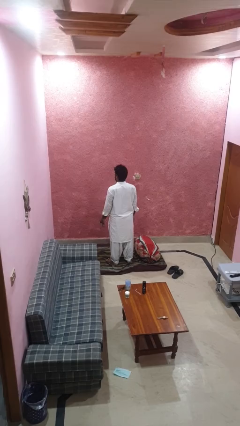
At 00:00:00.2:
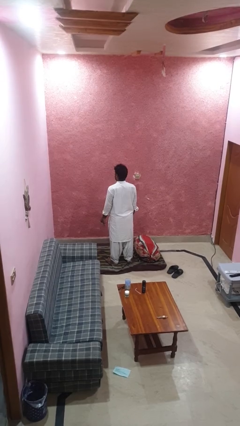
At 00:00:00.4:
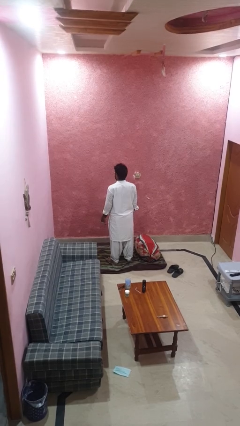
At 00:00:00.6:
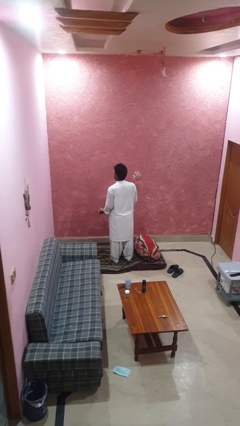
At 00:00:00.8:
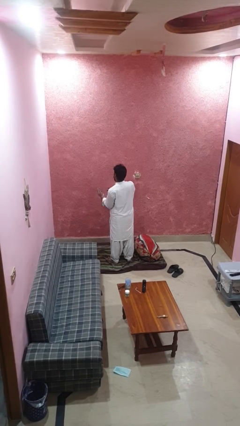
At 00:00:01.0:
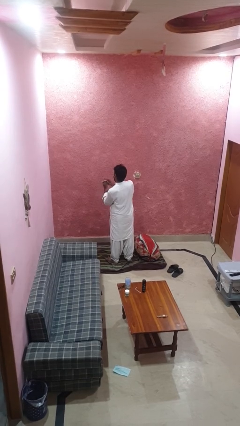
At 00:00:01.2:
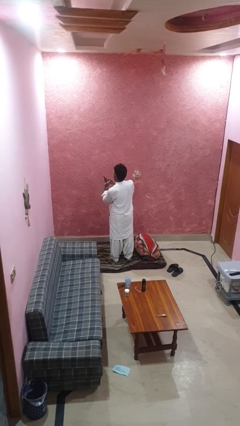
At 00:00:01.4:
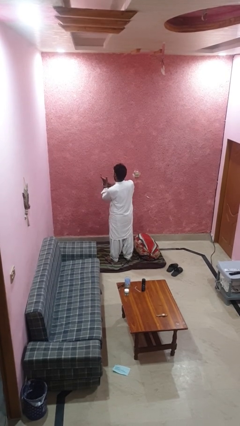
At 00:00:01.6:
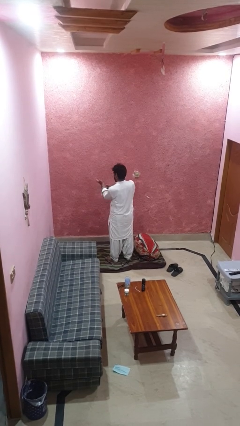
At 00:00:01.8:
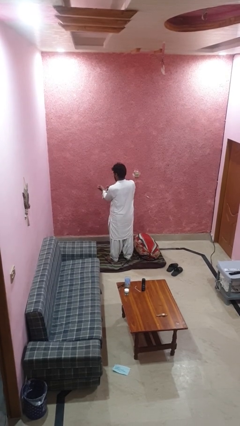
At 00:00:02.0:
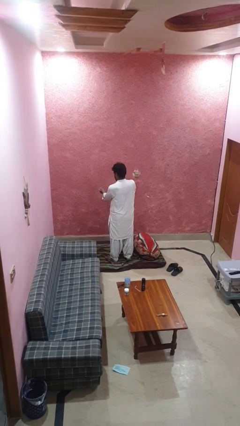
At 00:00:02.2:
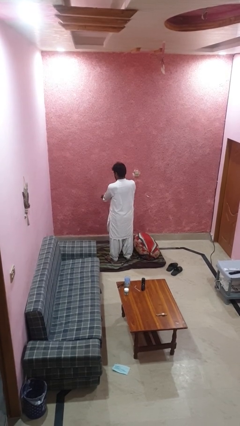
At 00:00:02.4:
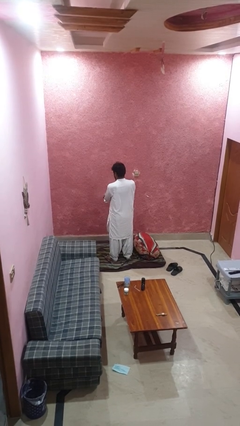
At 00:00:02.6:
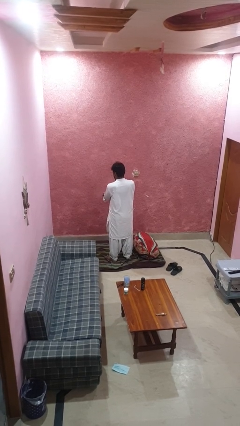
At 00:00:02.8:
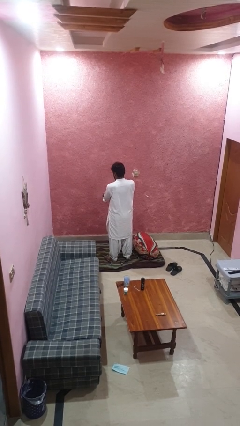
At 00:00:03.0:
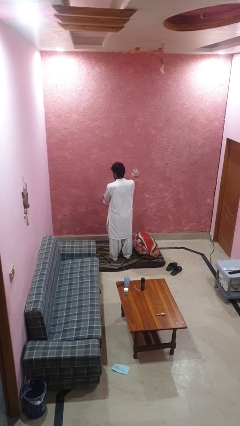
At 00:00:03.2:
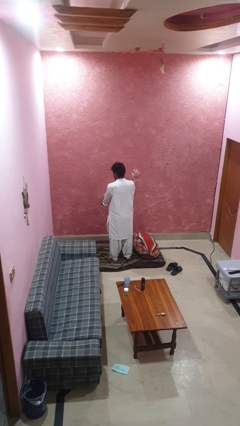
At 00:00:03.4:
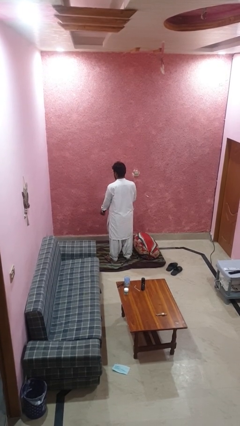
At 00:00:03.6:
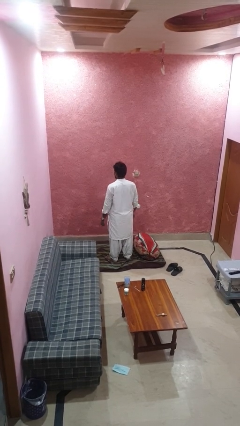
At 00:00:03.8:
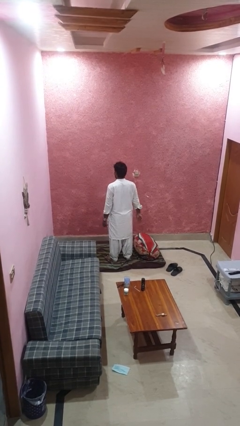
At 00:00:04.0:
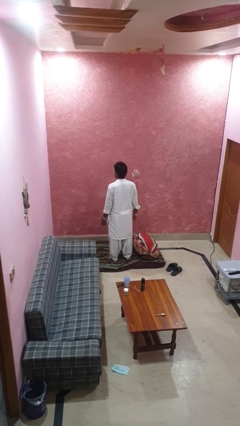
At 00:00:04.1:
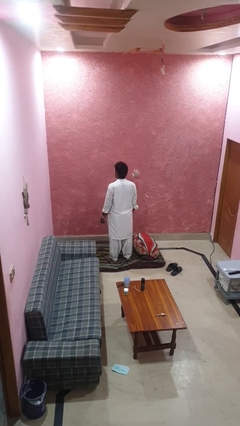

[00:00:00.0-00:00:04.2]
person puts on wristwatch

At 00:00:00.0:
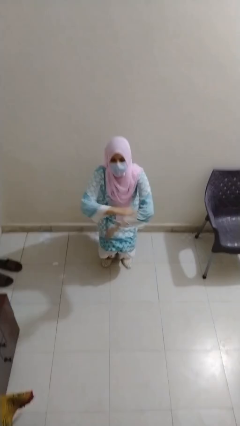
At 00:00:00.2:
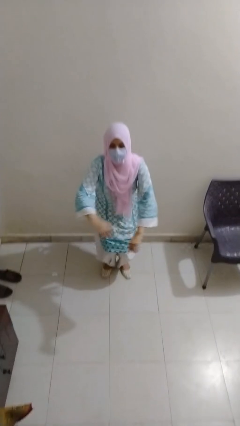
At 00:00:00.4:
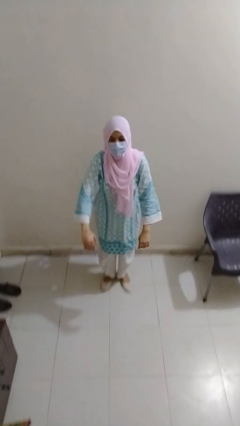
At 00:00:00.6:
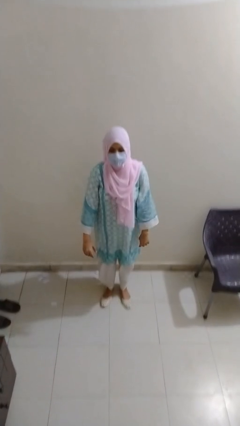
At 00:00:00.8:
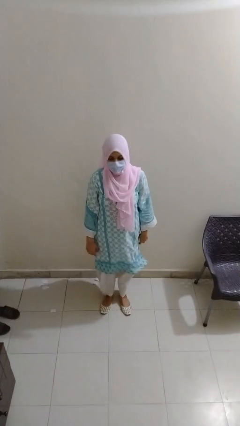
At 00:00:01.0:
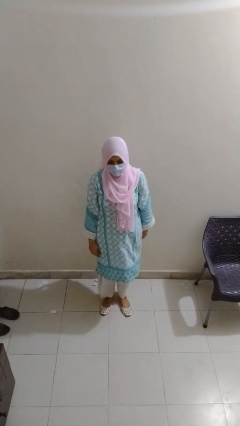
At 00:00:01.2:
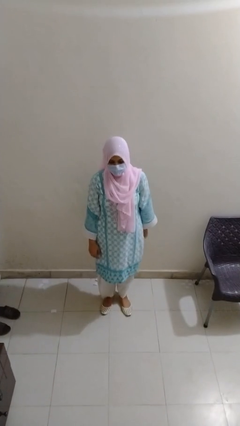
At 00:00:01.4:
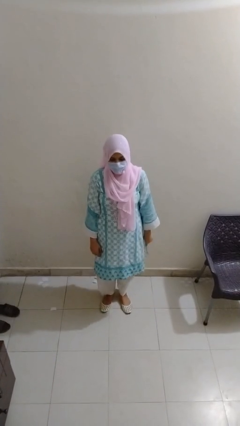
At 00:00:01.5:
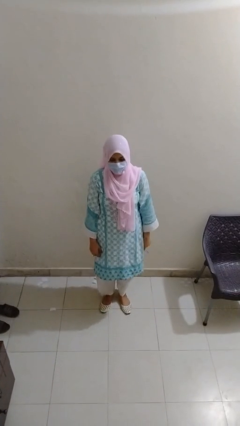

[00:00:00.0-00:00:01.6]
person stands up

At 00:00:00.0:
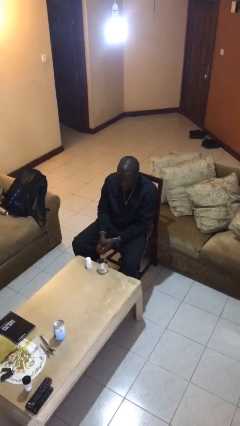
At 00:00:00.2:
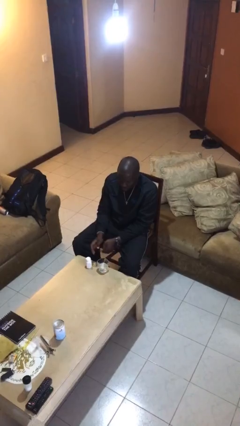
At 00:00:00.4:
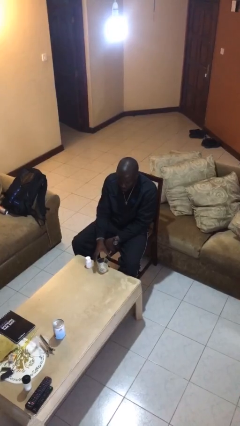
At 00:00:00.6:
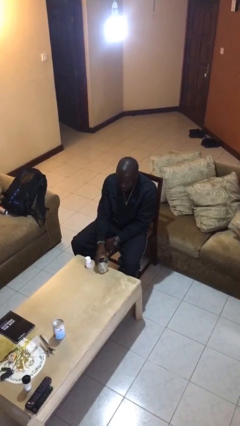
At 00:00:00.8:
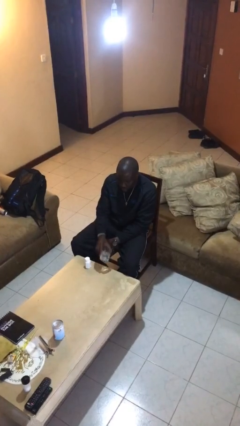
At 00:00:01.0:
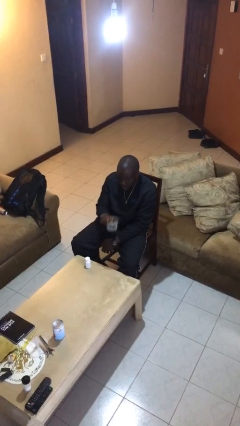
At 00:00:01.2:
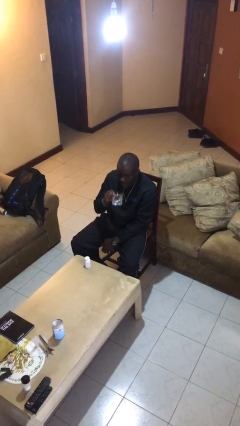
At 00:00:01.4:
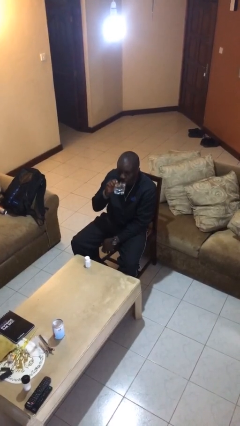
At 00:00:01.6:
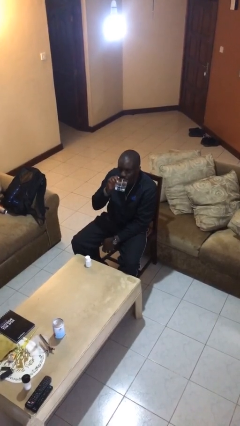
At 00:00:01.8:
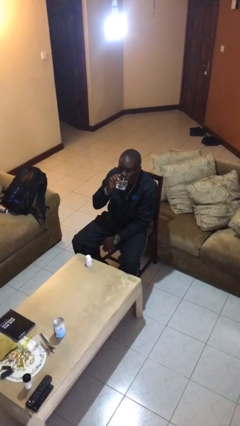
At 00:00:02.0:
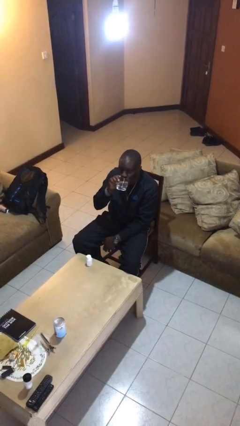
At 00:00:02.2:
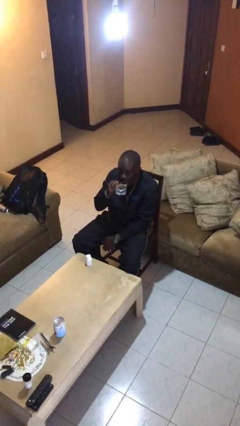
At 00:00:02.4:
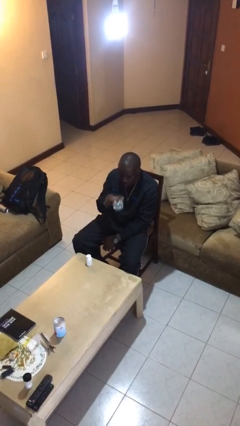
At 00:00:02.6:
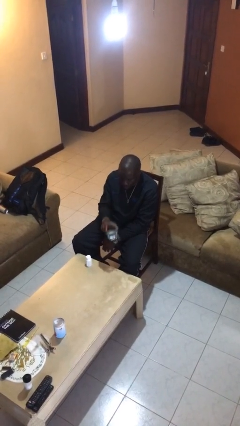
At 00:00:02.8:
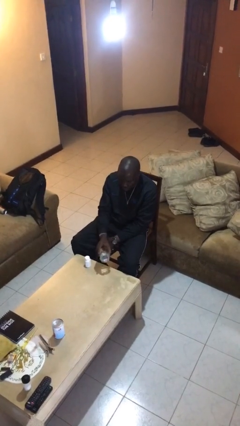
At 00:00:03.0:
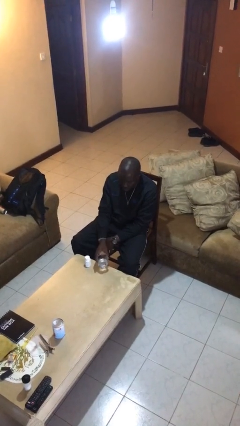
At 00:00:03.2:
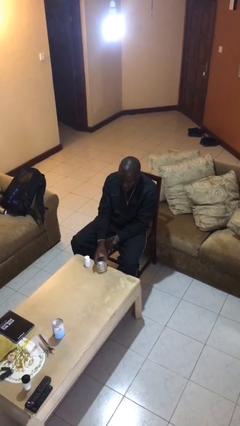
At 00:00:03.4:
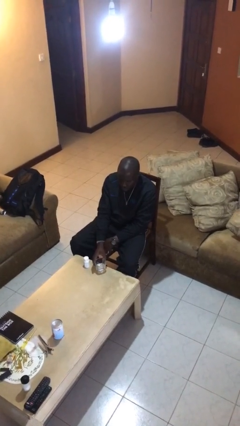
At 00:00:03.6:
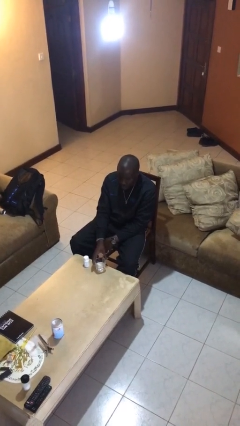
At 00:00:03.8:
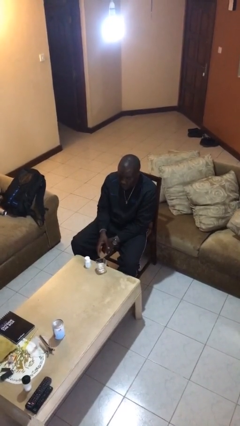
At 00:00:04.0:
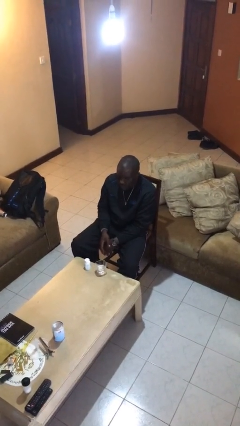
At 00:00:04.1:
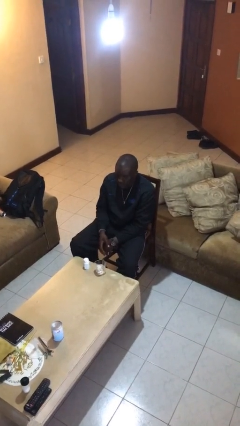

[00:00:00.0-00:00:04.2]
person drinks from cup

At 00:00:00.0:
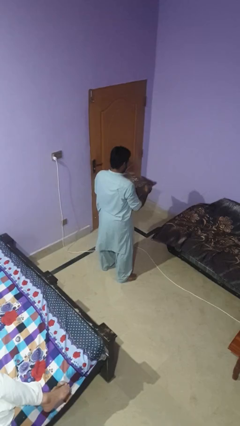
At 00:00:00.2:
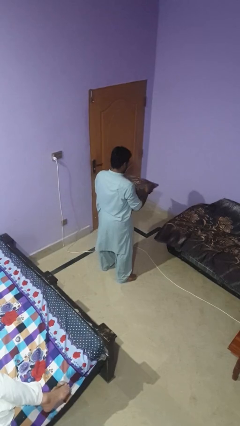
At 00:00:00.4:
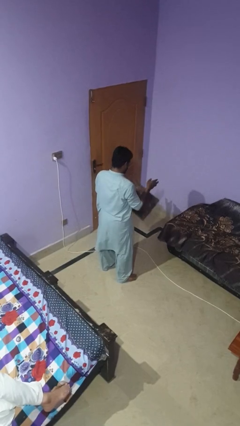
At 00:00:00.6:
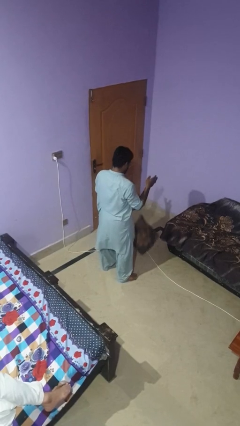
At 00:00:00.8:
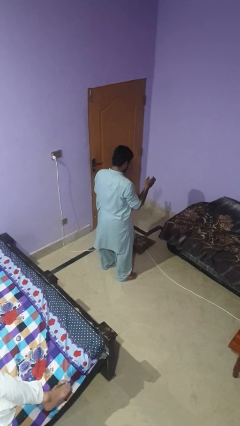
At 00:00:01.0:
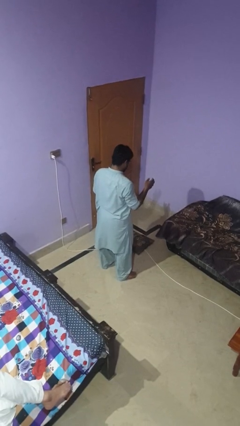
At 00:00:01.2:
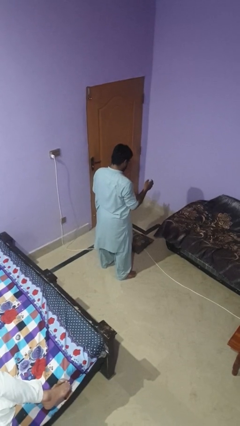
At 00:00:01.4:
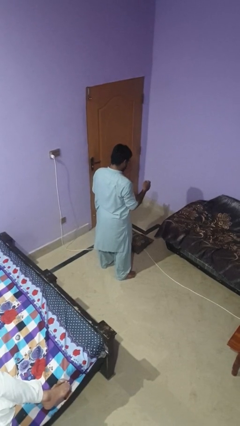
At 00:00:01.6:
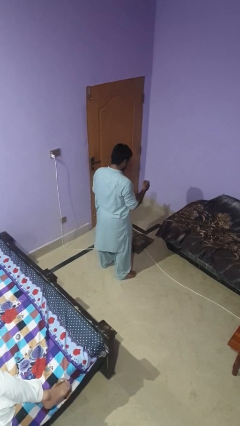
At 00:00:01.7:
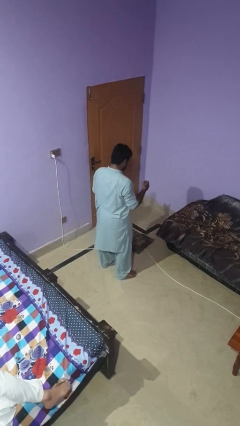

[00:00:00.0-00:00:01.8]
person drops object

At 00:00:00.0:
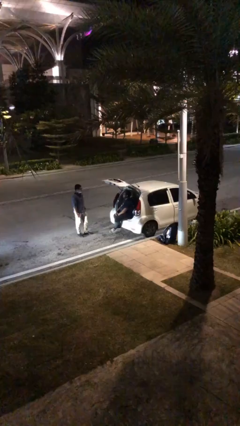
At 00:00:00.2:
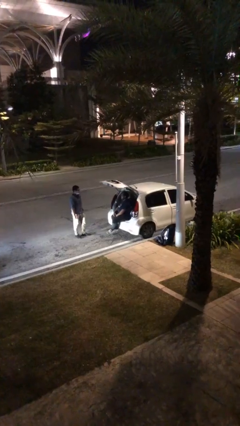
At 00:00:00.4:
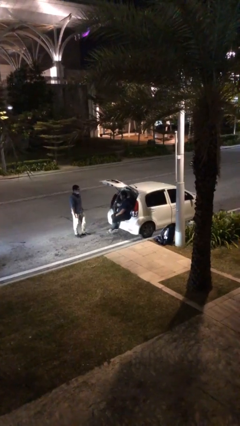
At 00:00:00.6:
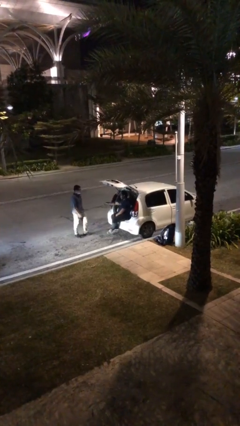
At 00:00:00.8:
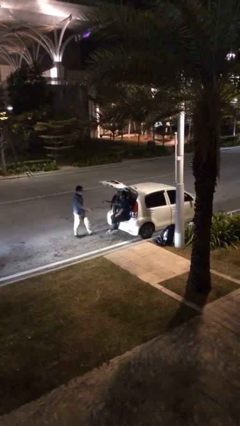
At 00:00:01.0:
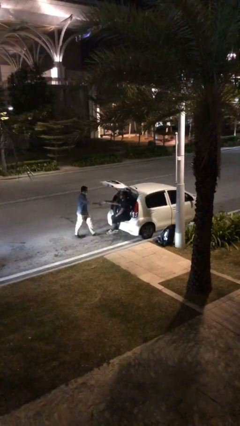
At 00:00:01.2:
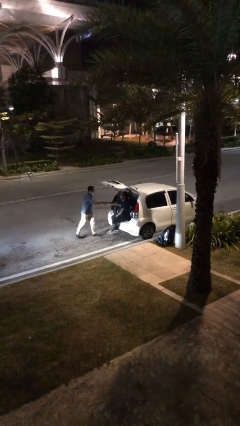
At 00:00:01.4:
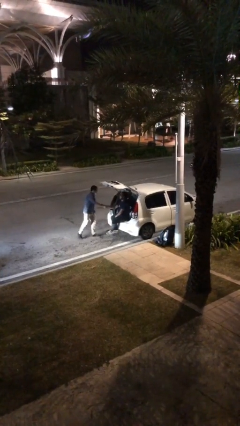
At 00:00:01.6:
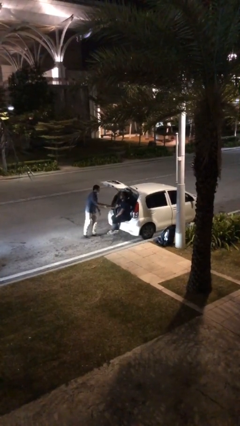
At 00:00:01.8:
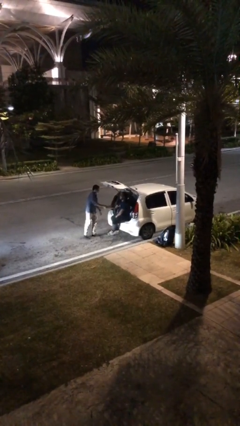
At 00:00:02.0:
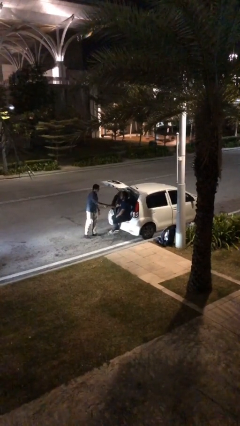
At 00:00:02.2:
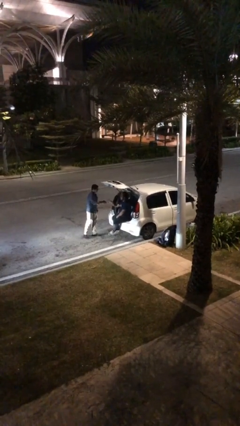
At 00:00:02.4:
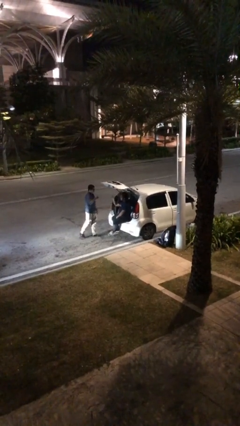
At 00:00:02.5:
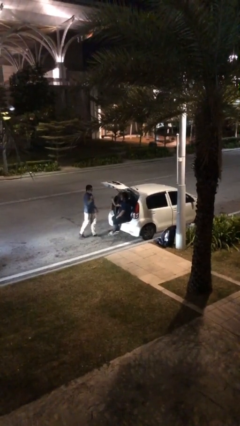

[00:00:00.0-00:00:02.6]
person shakes hand

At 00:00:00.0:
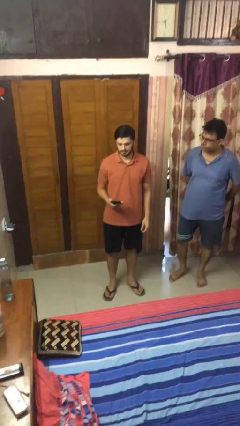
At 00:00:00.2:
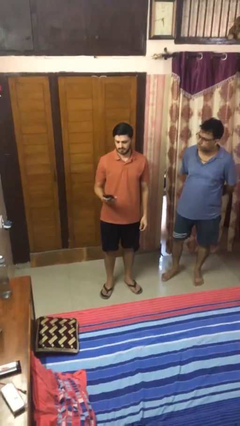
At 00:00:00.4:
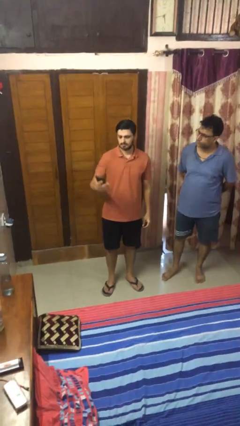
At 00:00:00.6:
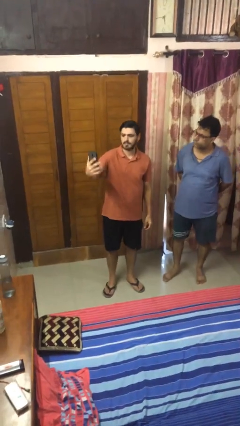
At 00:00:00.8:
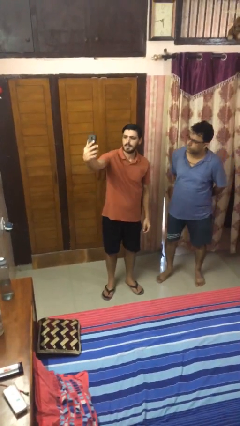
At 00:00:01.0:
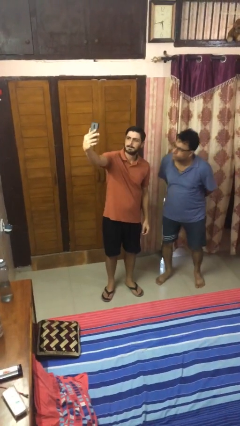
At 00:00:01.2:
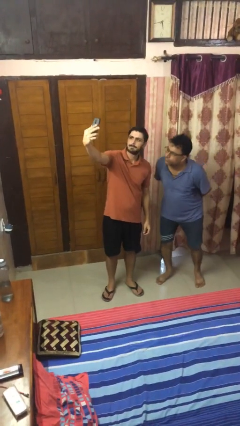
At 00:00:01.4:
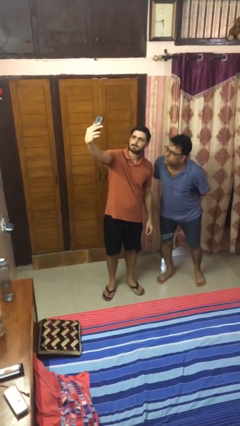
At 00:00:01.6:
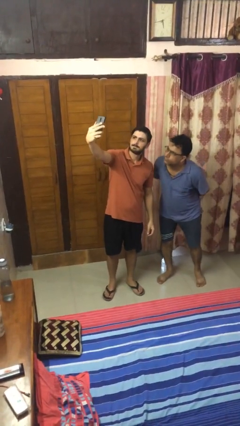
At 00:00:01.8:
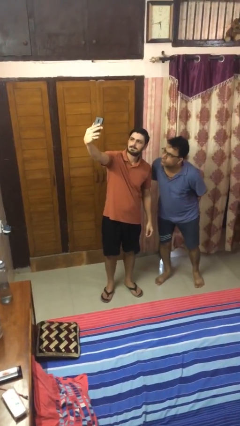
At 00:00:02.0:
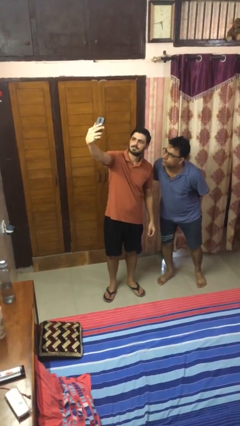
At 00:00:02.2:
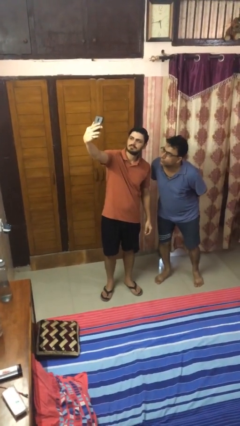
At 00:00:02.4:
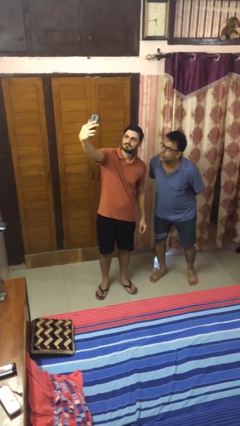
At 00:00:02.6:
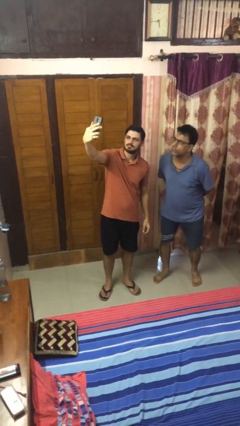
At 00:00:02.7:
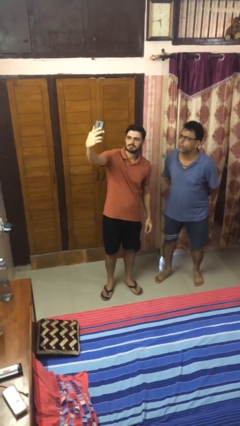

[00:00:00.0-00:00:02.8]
person takes selfie with person
